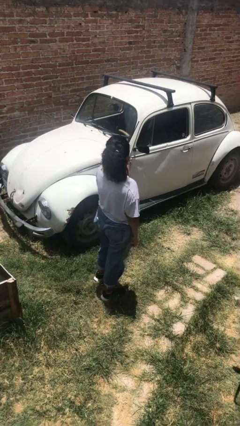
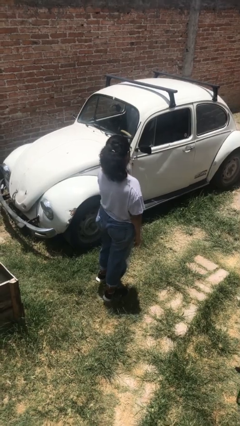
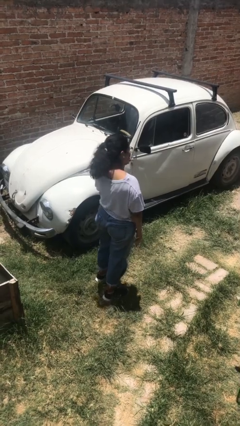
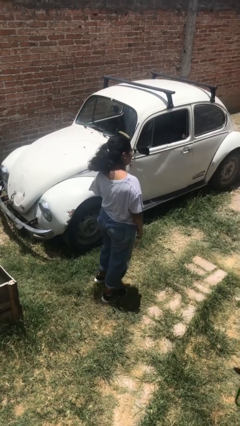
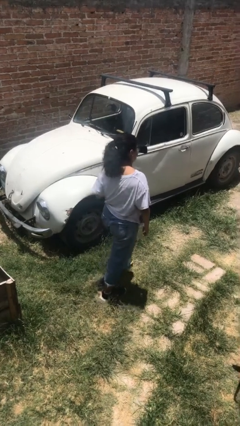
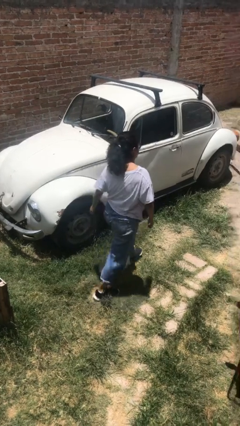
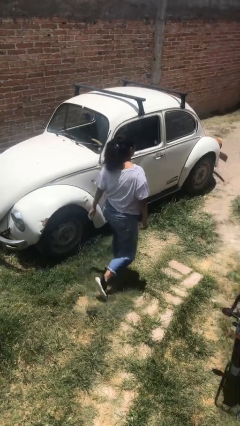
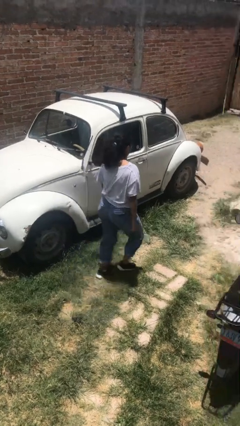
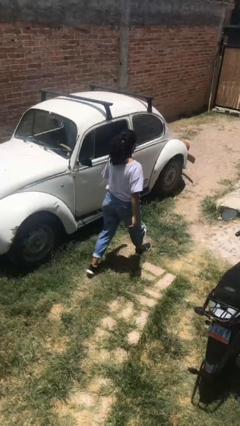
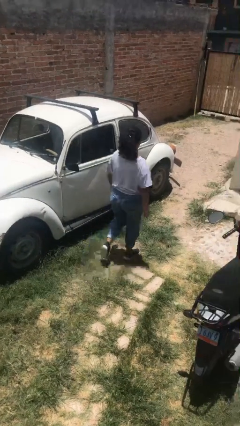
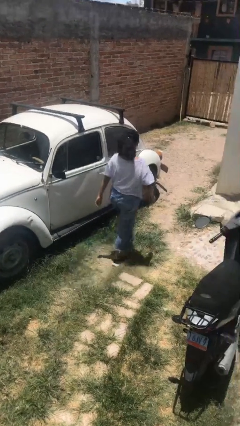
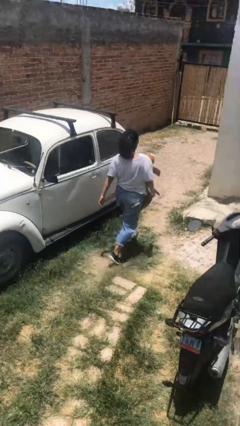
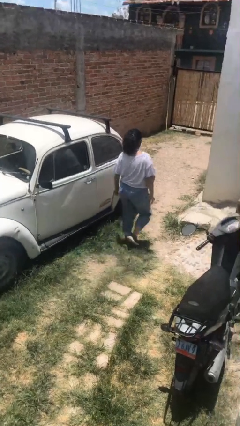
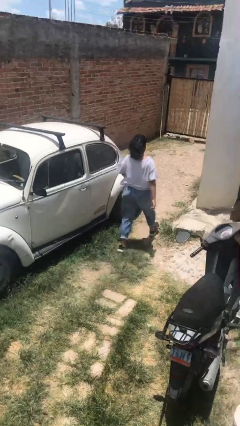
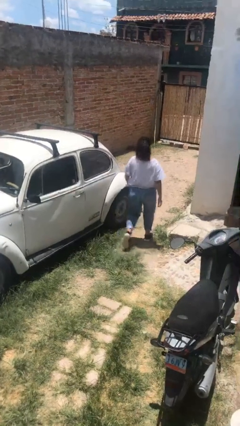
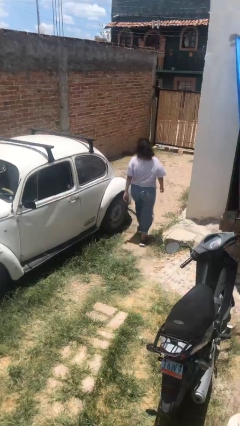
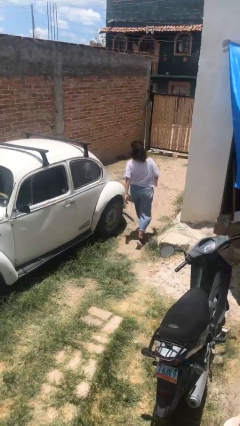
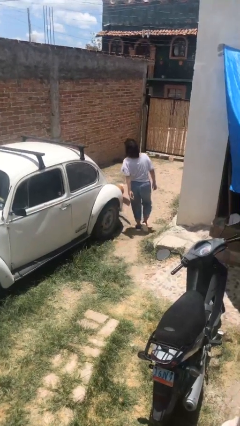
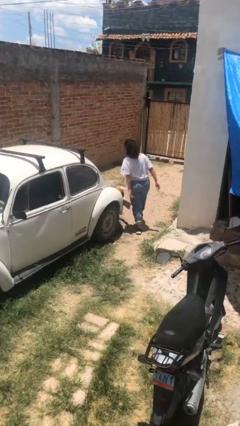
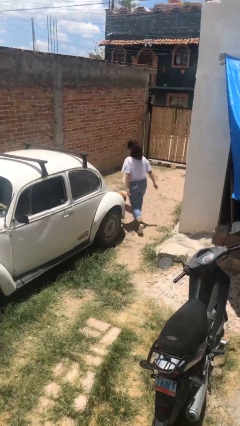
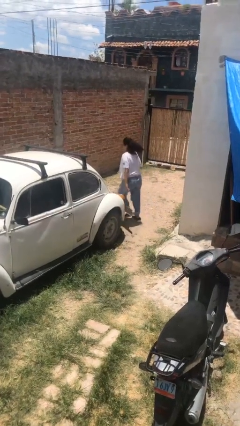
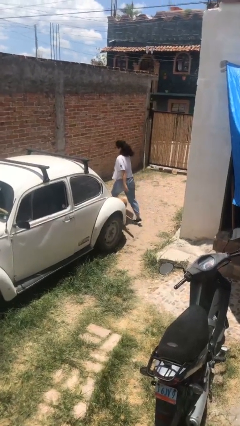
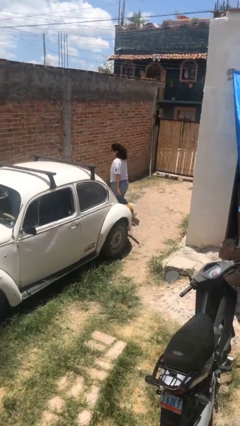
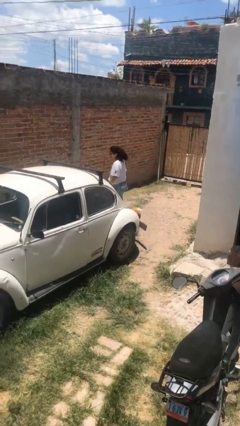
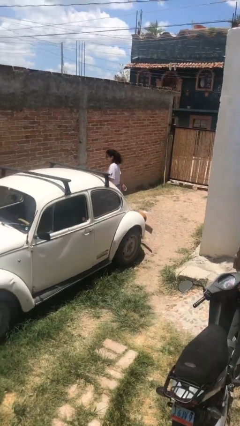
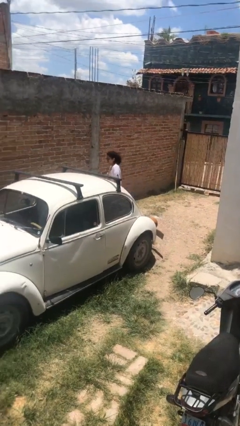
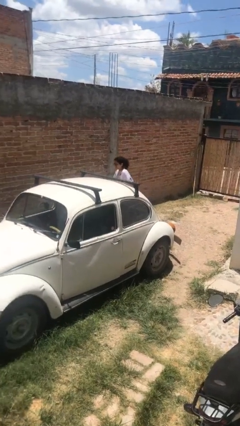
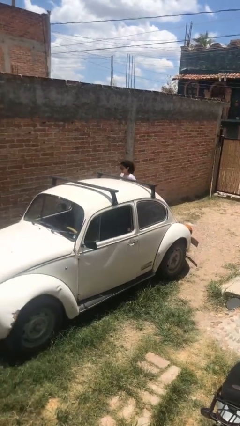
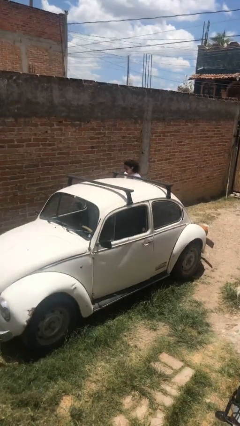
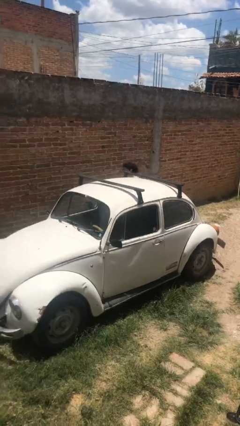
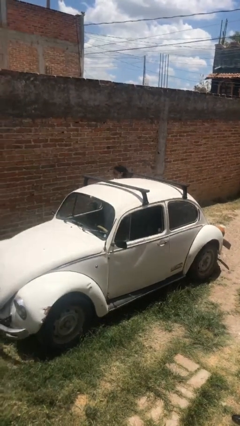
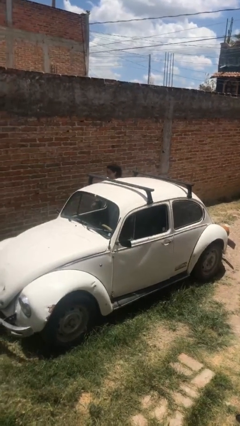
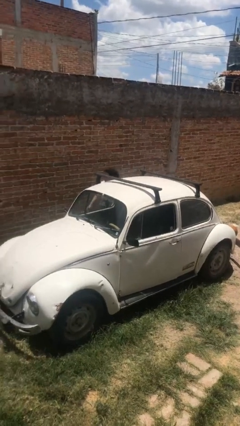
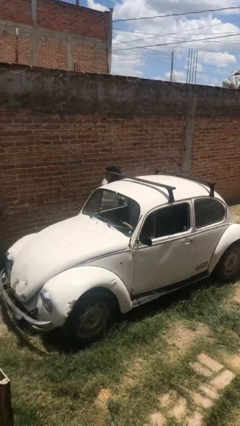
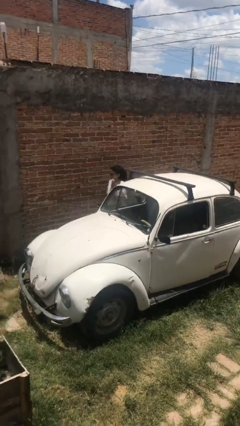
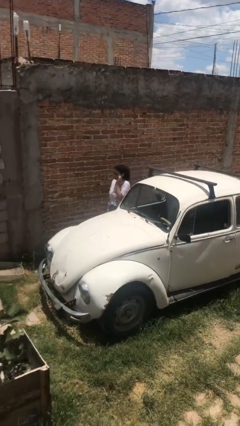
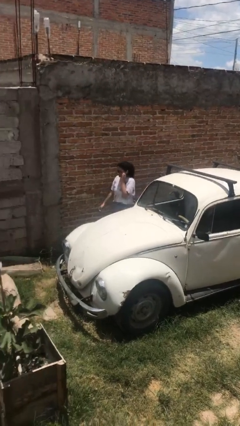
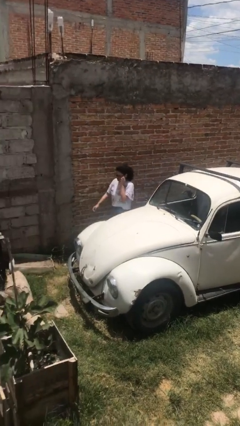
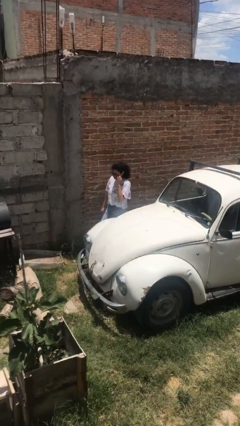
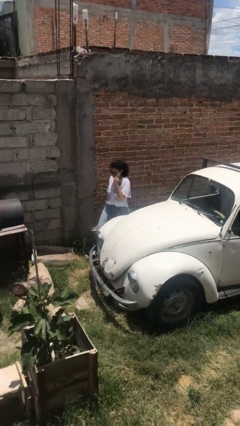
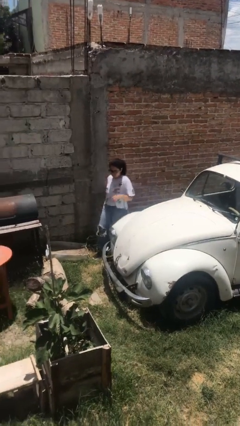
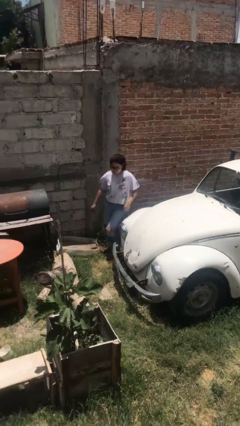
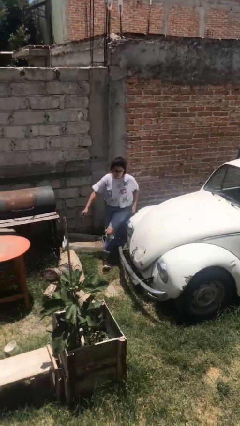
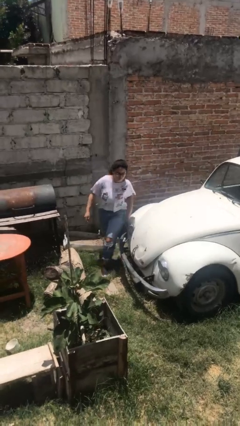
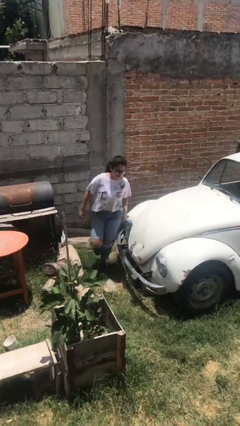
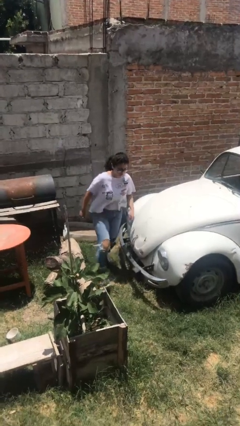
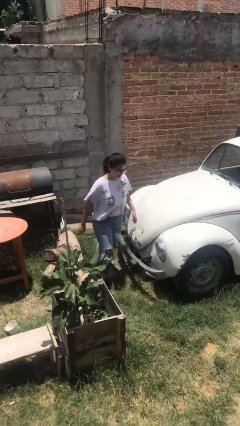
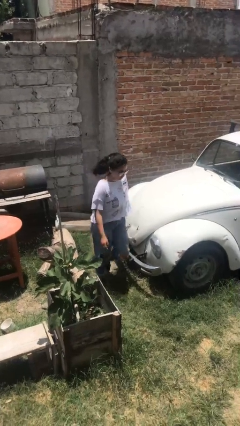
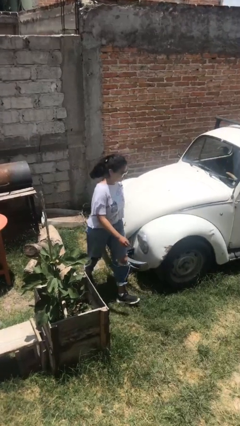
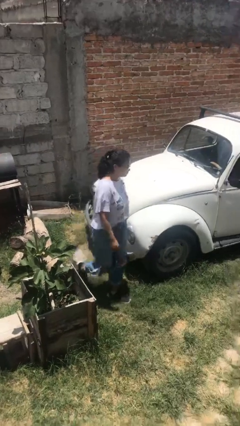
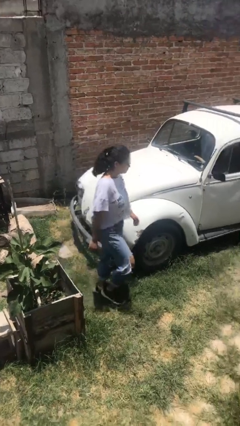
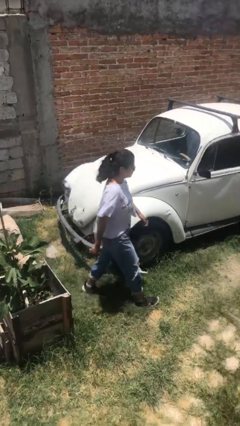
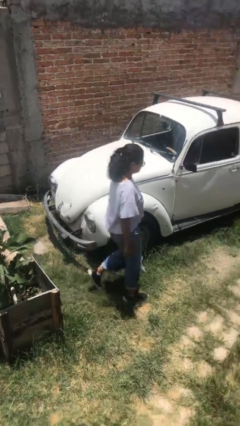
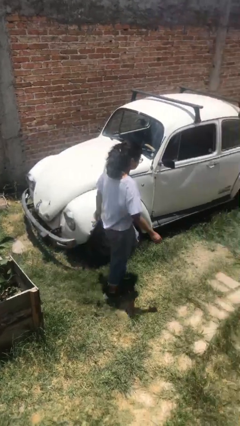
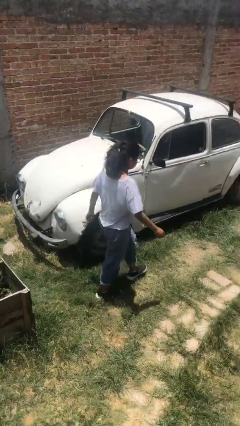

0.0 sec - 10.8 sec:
person walks around car

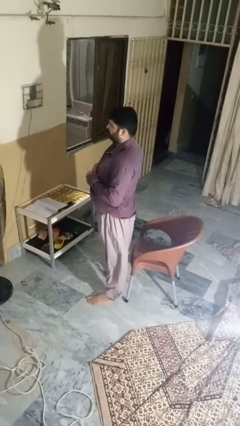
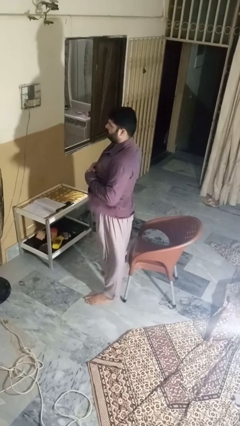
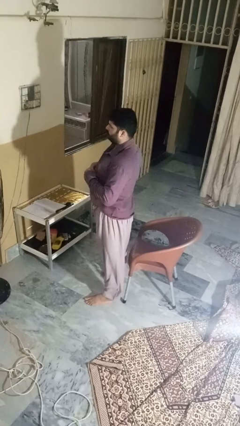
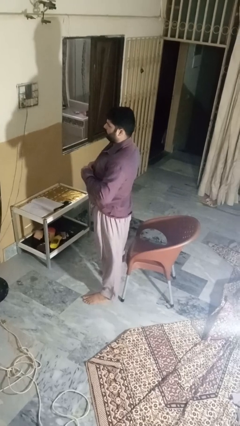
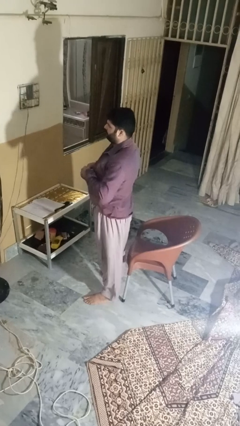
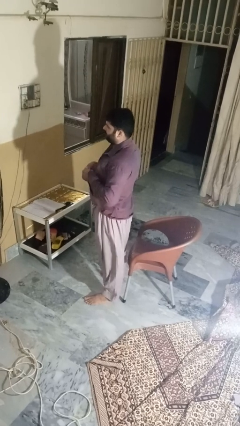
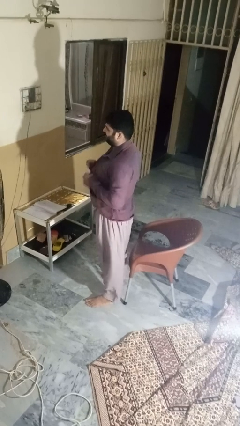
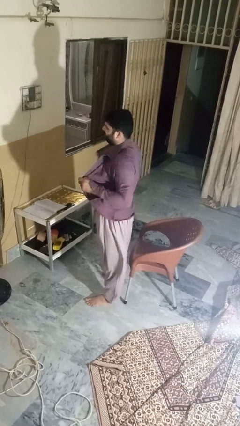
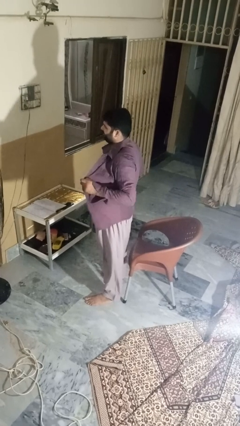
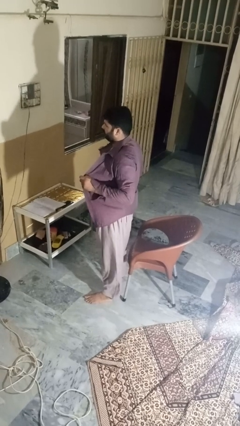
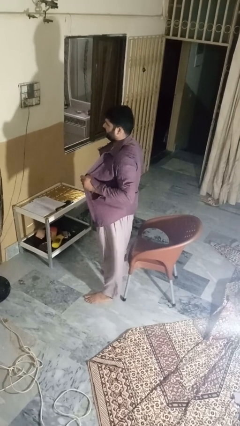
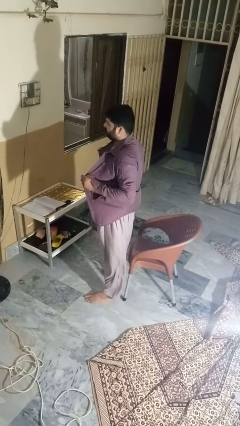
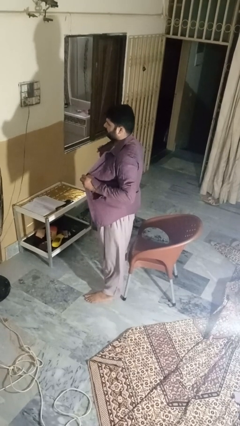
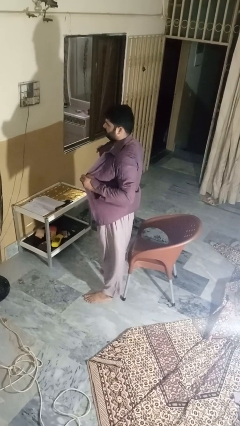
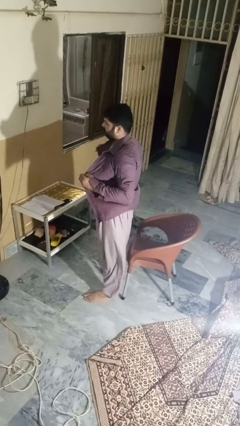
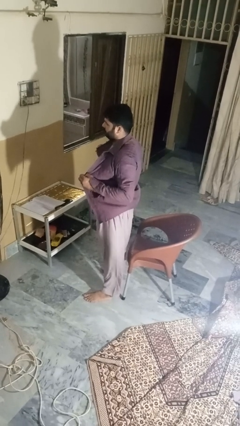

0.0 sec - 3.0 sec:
person unbuttons shirt

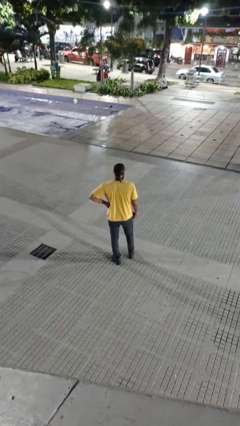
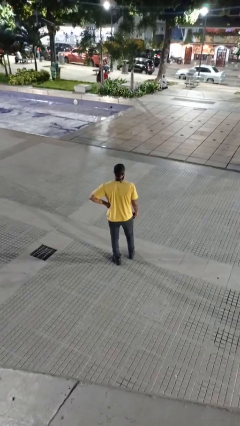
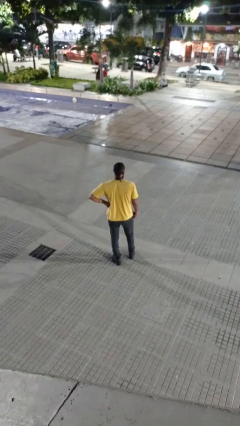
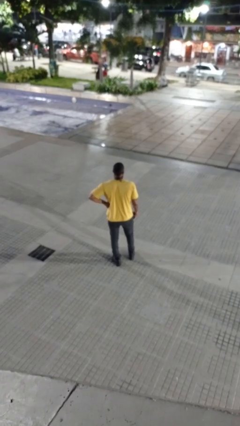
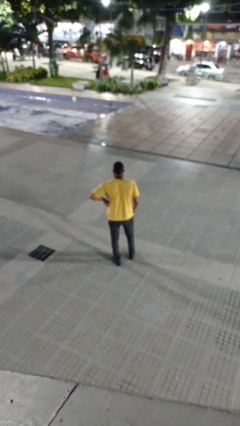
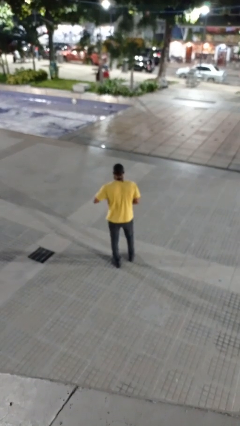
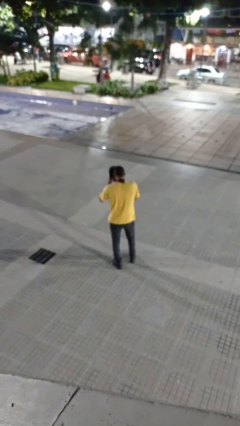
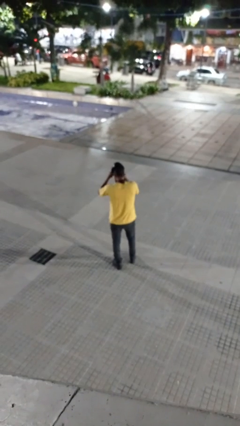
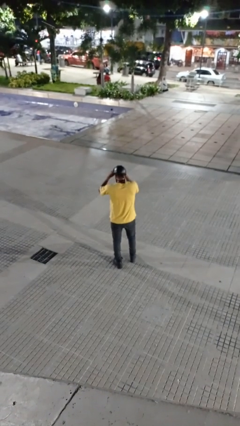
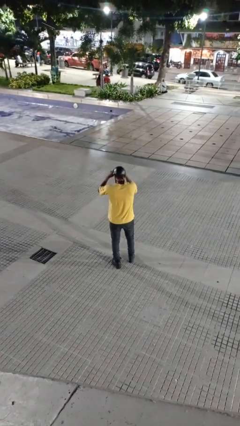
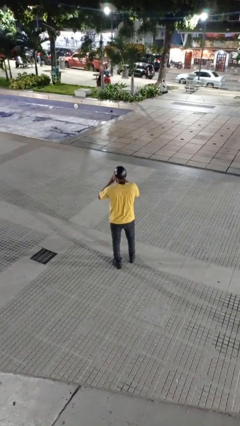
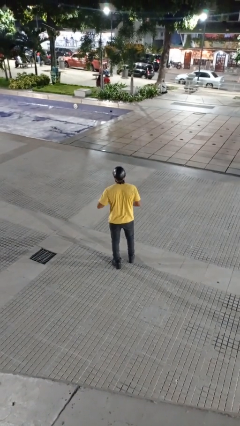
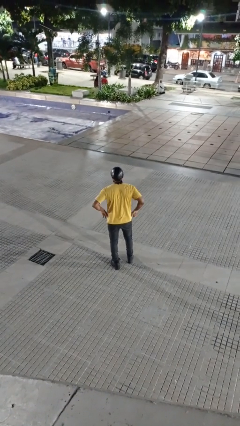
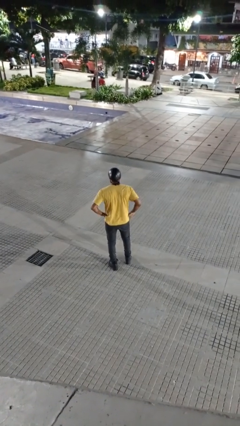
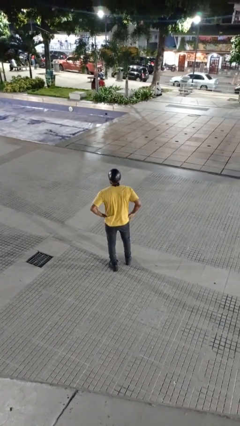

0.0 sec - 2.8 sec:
person puts on hat

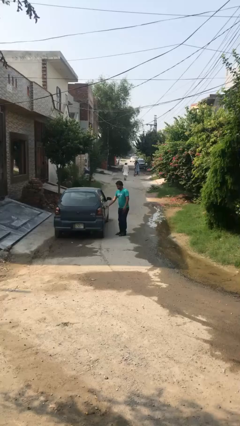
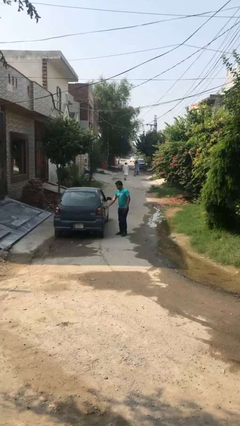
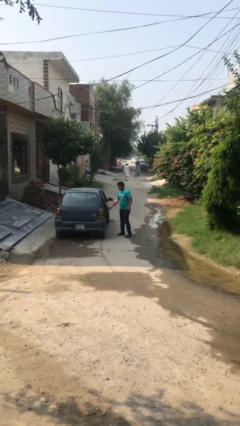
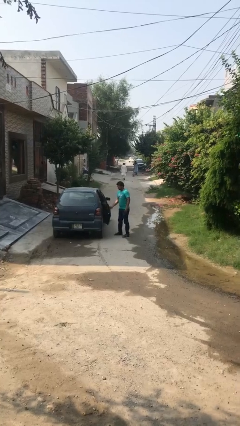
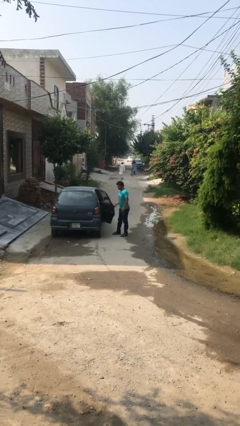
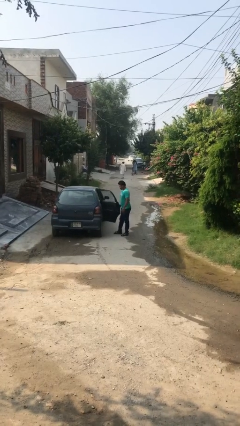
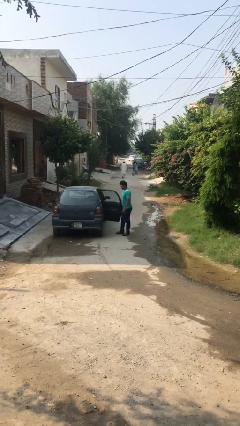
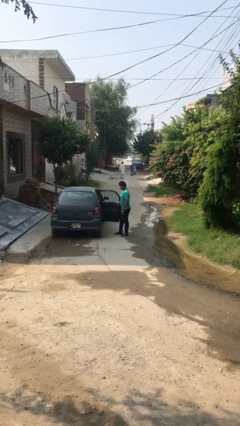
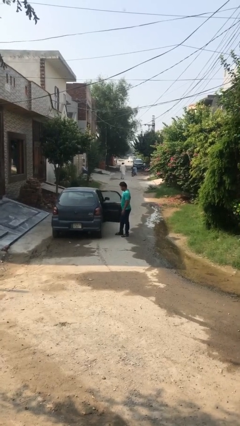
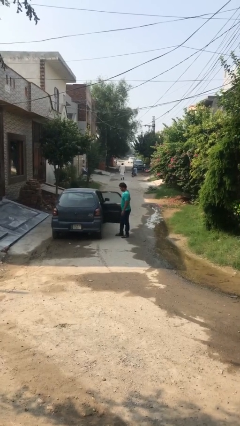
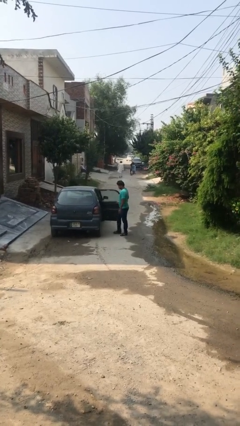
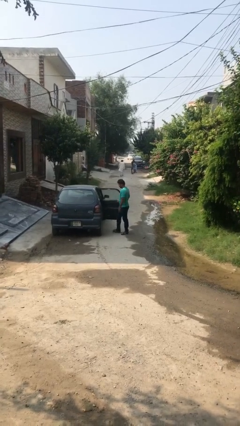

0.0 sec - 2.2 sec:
person opens car door
